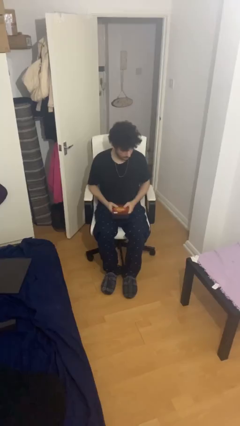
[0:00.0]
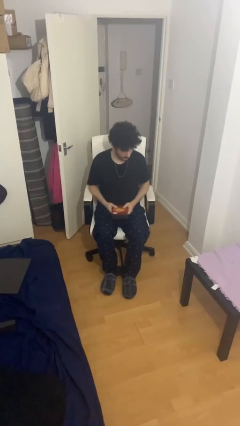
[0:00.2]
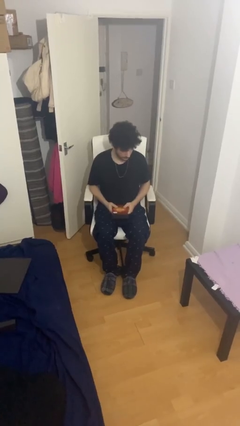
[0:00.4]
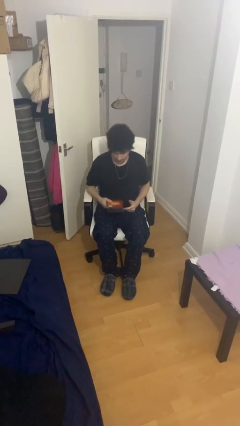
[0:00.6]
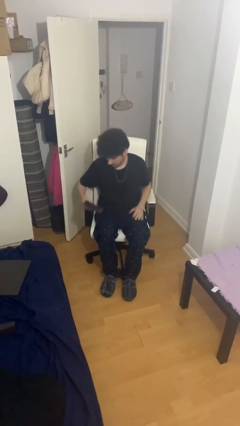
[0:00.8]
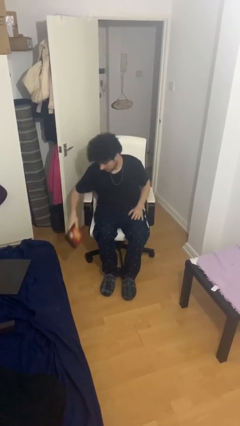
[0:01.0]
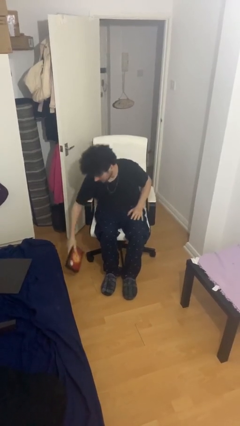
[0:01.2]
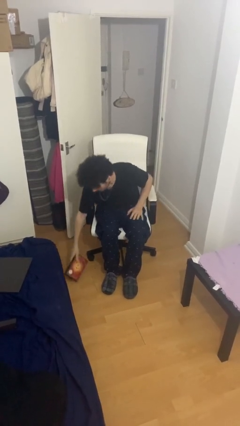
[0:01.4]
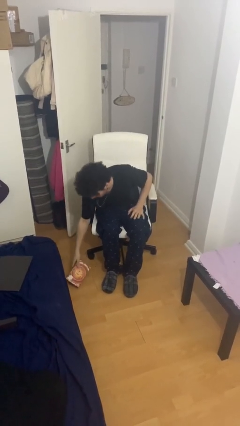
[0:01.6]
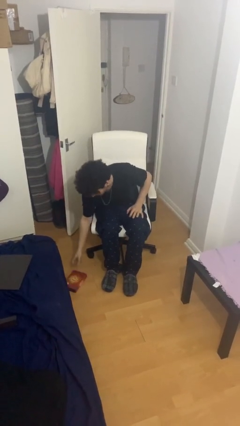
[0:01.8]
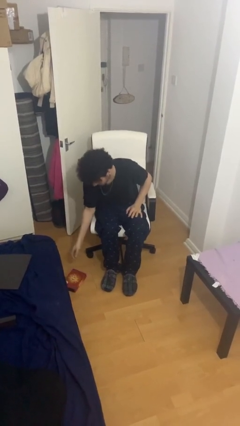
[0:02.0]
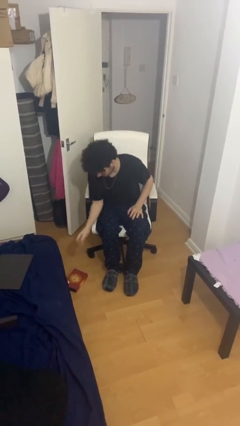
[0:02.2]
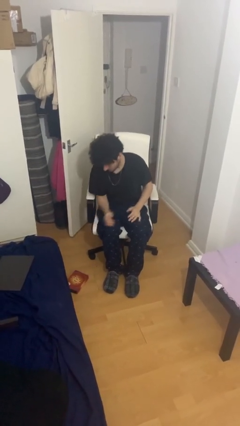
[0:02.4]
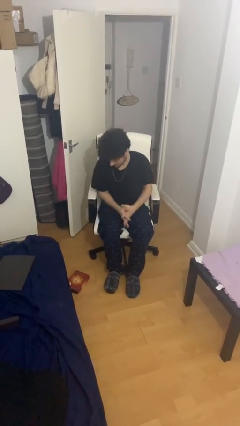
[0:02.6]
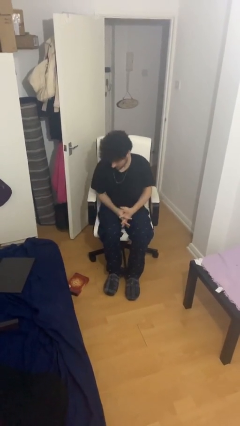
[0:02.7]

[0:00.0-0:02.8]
person puts down object on floor

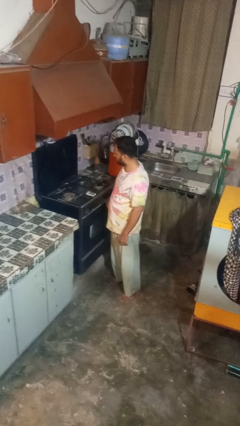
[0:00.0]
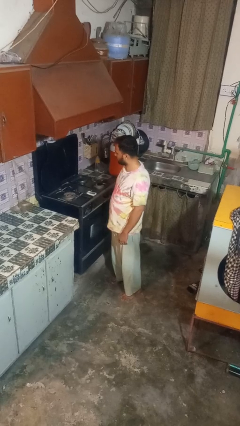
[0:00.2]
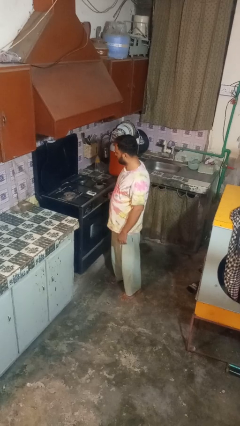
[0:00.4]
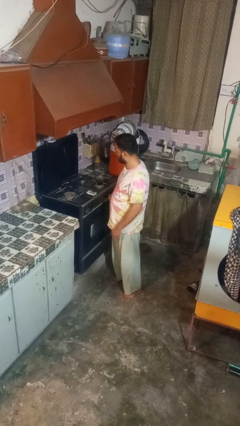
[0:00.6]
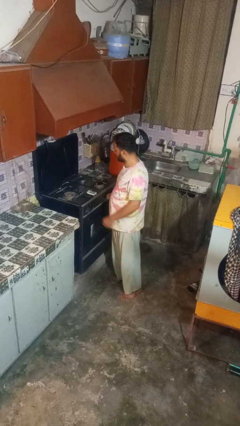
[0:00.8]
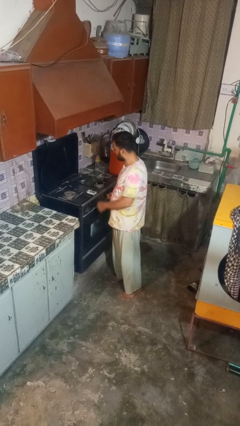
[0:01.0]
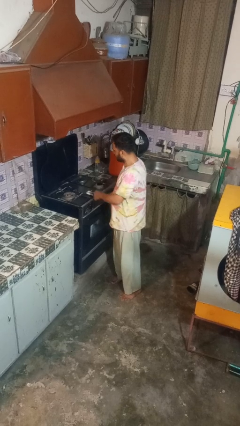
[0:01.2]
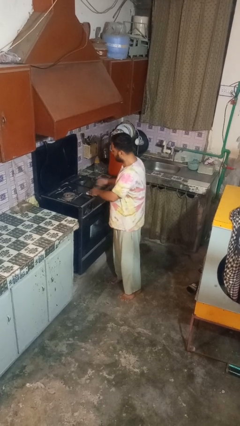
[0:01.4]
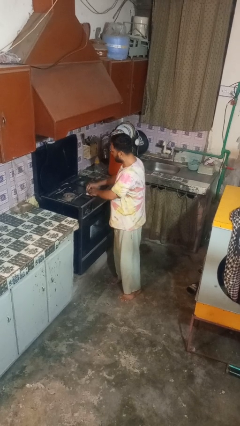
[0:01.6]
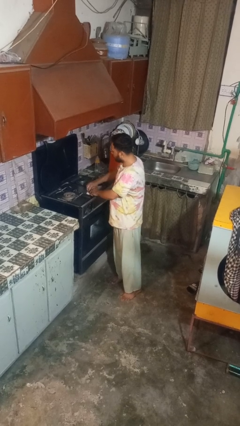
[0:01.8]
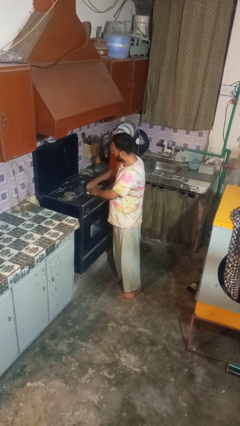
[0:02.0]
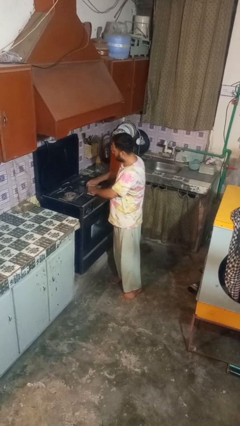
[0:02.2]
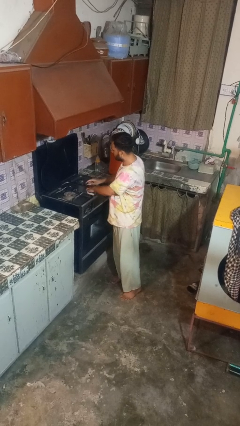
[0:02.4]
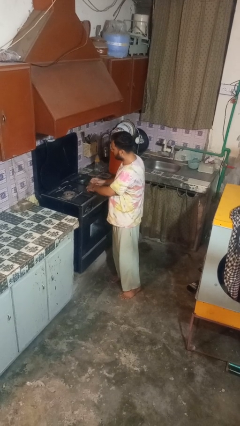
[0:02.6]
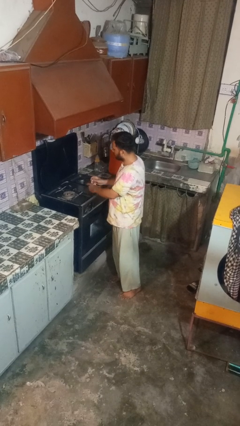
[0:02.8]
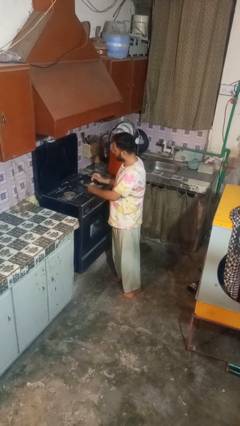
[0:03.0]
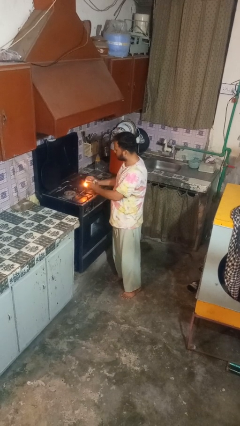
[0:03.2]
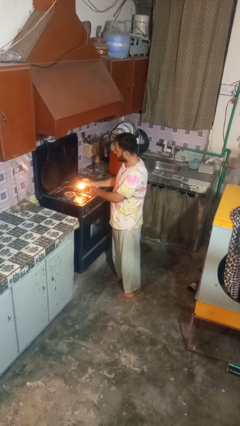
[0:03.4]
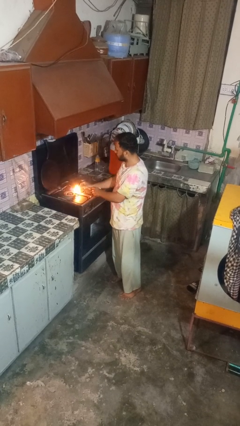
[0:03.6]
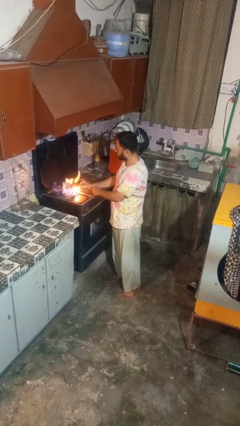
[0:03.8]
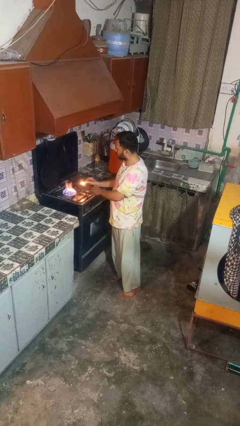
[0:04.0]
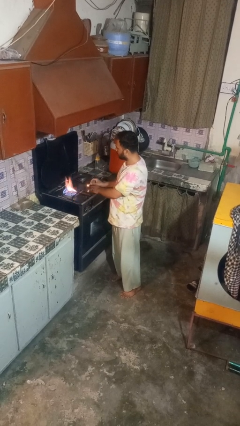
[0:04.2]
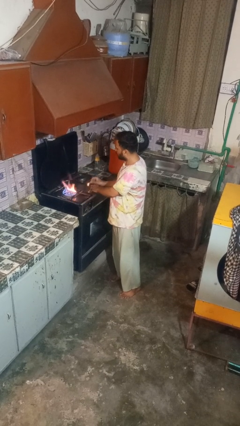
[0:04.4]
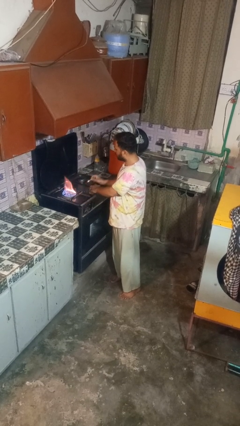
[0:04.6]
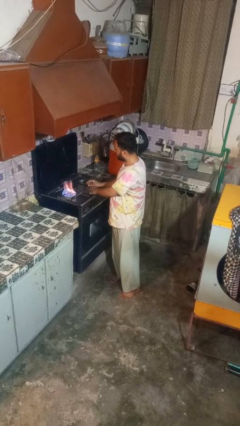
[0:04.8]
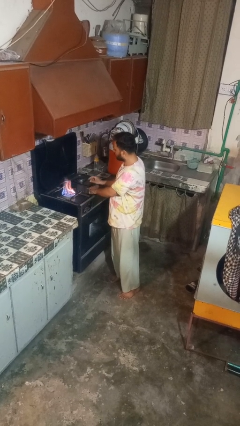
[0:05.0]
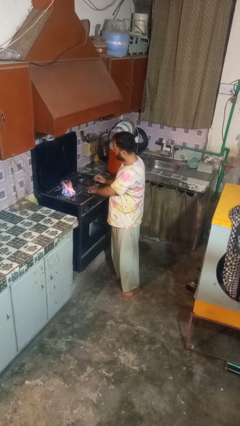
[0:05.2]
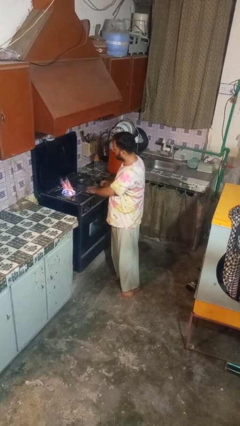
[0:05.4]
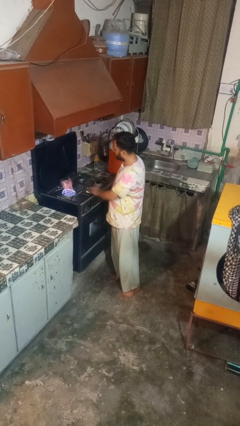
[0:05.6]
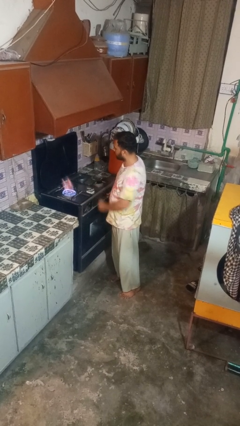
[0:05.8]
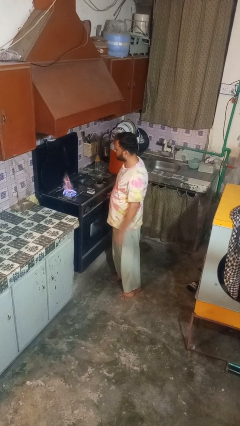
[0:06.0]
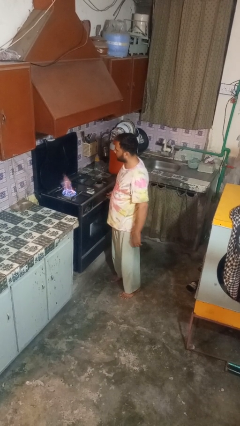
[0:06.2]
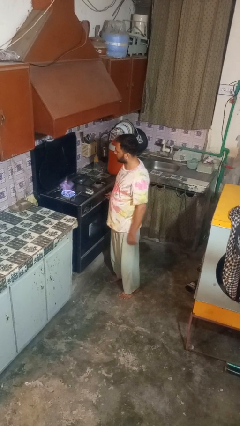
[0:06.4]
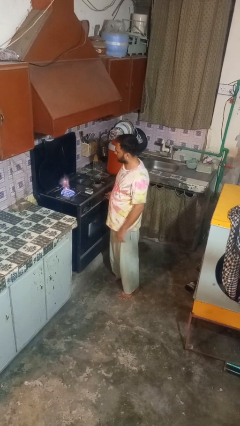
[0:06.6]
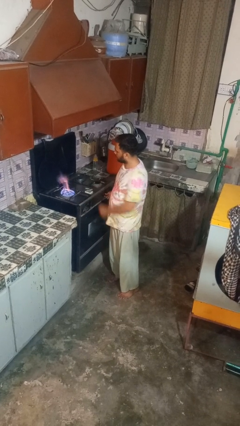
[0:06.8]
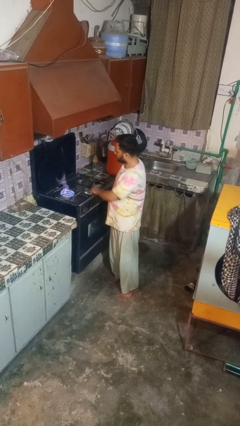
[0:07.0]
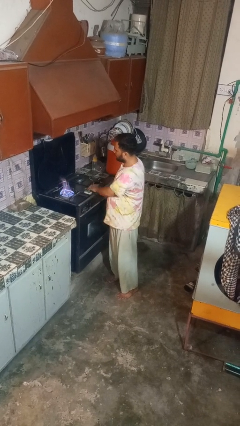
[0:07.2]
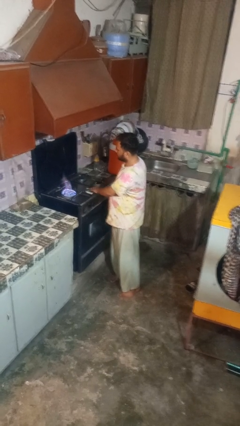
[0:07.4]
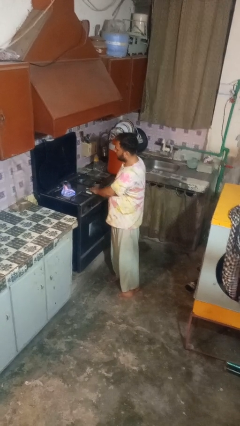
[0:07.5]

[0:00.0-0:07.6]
person turns on stovetop

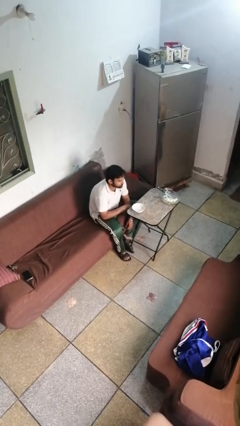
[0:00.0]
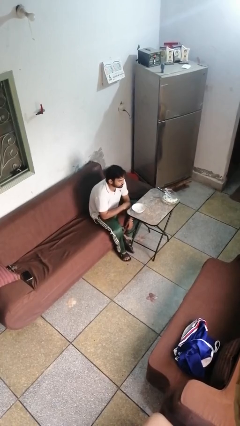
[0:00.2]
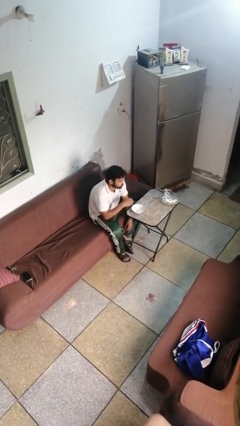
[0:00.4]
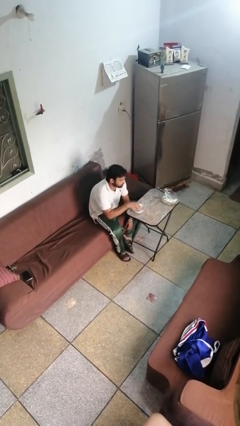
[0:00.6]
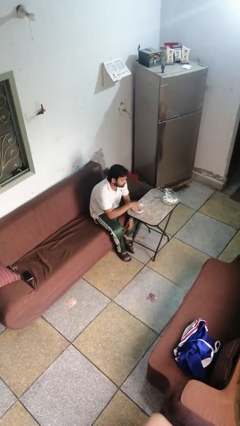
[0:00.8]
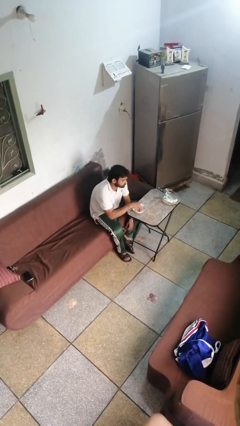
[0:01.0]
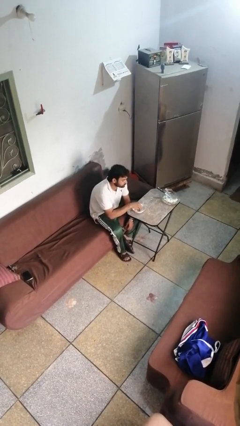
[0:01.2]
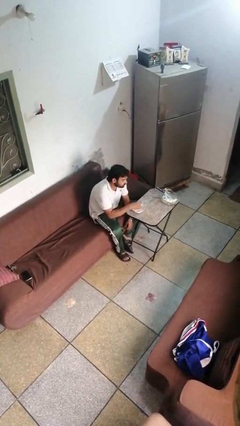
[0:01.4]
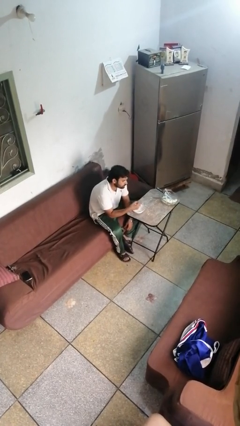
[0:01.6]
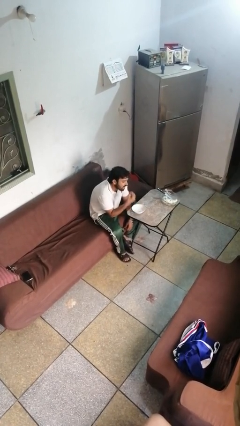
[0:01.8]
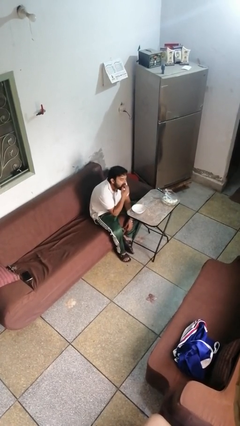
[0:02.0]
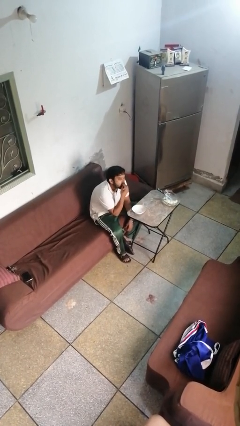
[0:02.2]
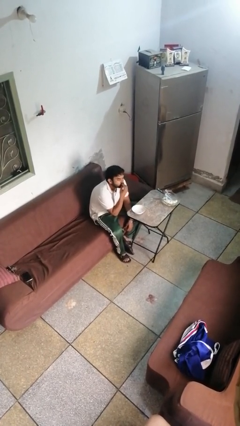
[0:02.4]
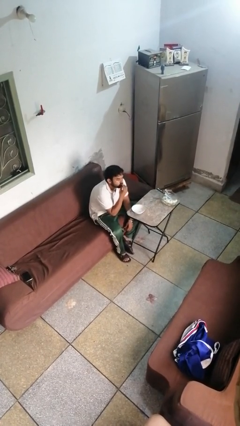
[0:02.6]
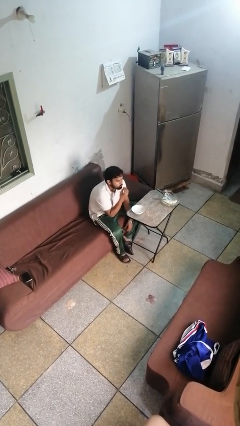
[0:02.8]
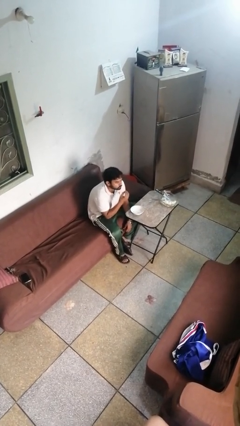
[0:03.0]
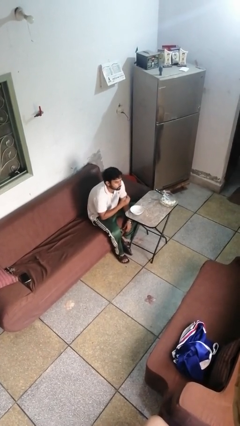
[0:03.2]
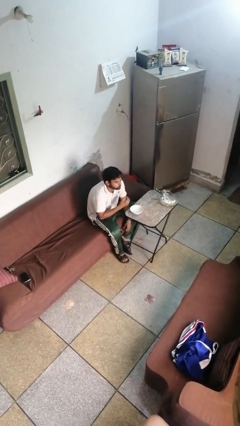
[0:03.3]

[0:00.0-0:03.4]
person eats with hands

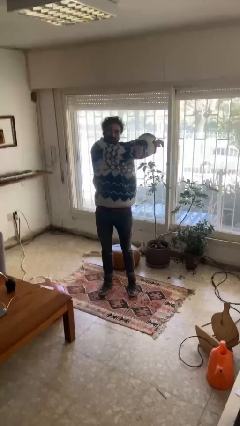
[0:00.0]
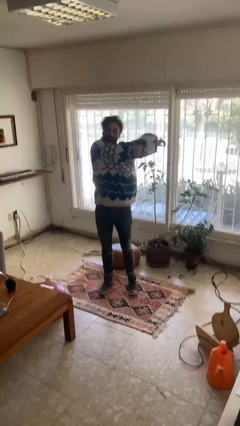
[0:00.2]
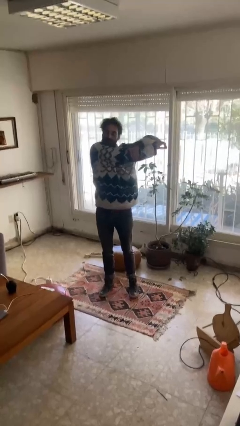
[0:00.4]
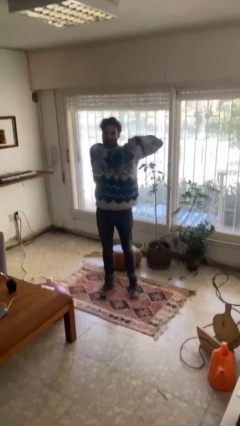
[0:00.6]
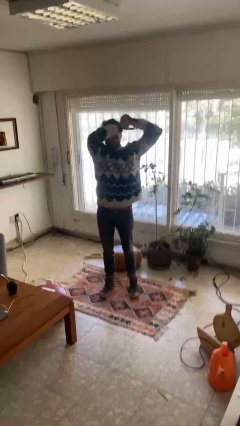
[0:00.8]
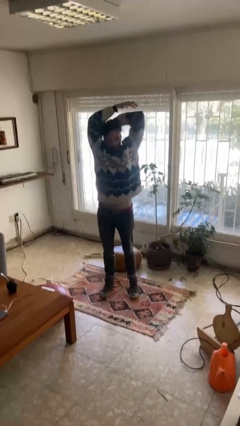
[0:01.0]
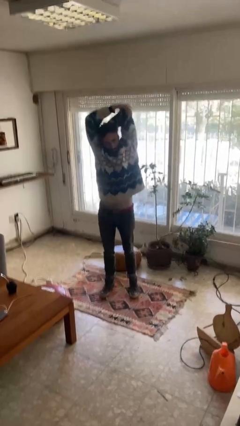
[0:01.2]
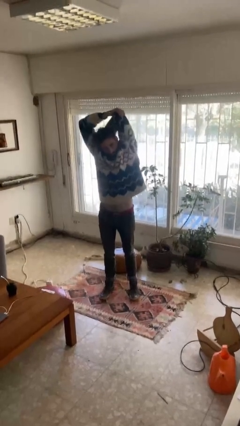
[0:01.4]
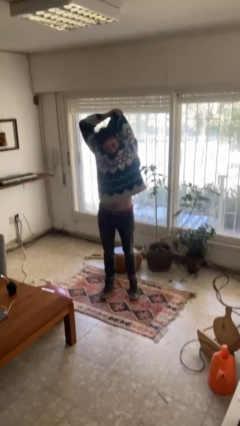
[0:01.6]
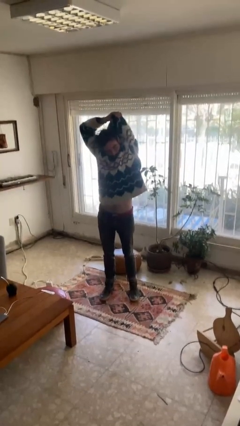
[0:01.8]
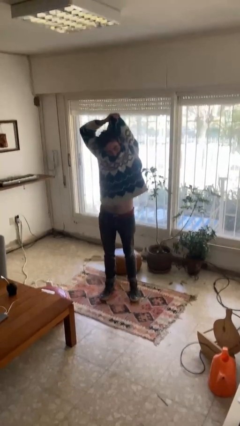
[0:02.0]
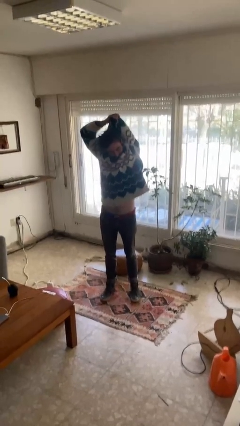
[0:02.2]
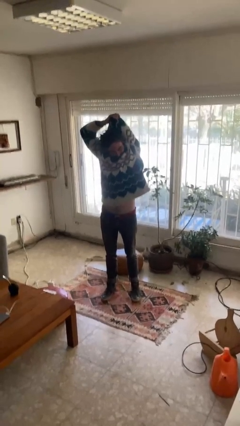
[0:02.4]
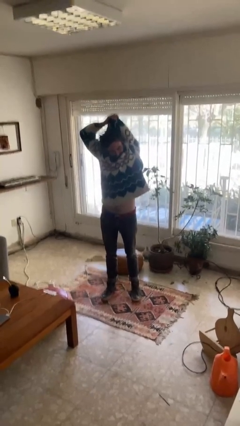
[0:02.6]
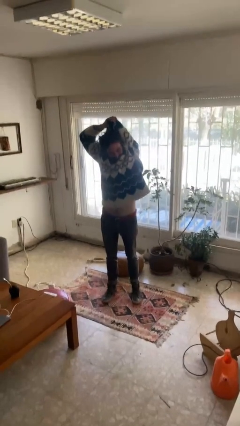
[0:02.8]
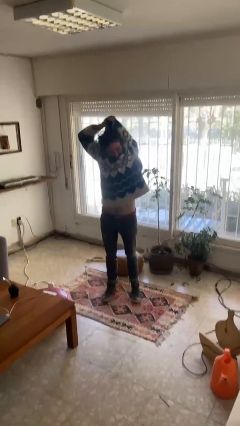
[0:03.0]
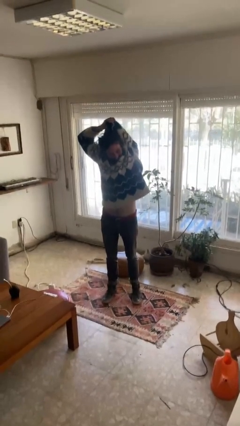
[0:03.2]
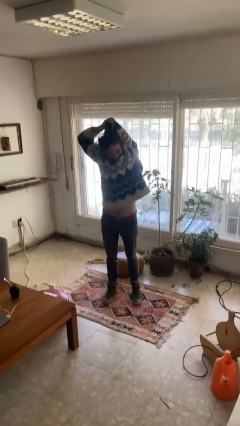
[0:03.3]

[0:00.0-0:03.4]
person stretches arms over head

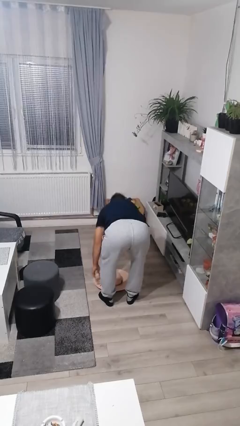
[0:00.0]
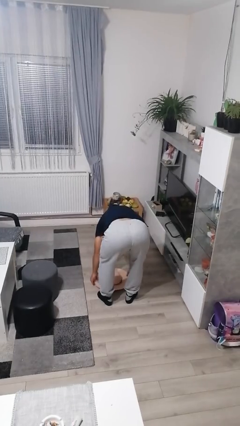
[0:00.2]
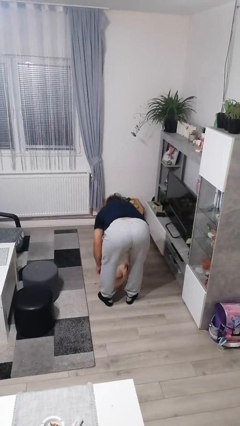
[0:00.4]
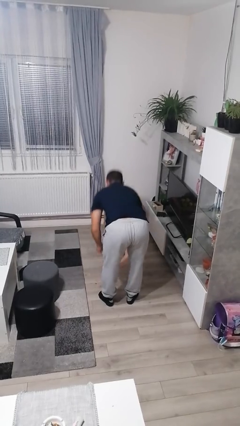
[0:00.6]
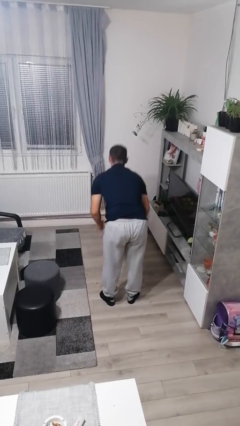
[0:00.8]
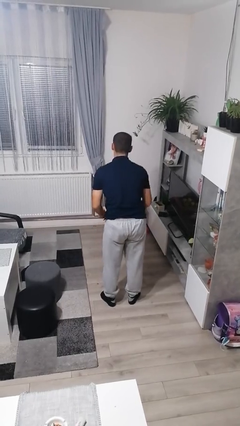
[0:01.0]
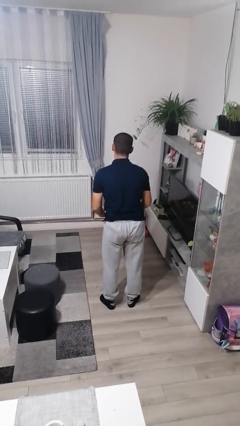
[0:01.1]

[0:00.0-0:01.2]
person picks up object from floor
